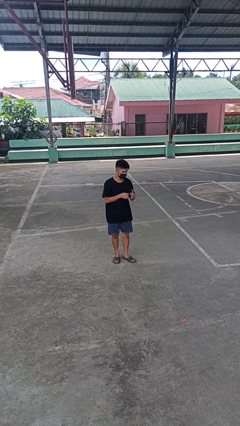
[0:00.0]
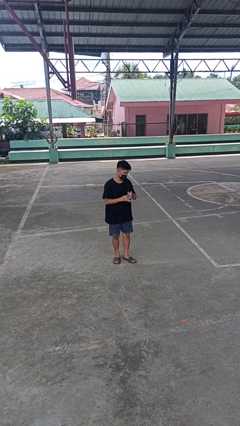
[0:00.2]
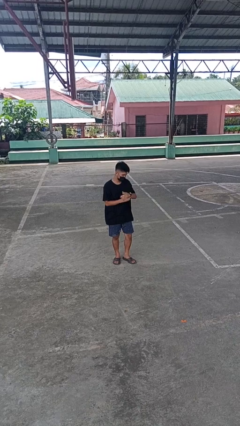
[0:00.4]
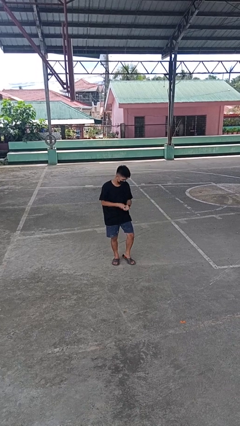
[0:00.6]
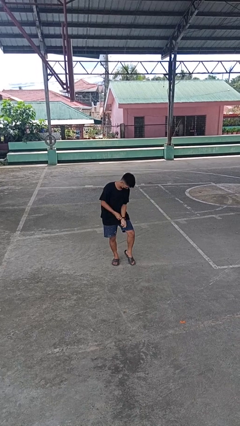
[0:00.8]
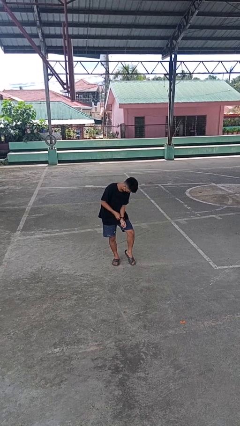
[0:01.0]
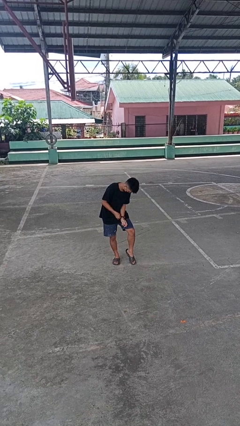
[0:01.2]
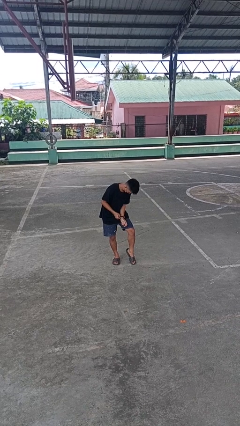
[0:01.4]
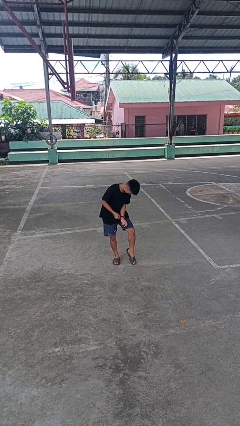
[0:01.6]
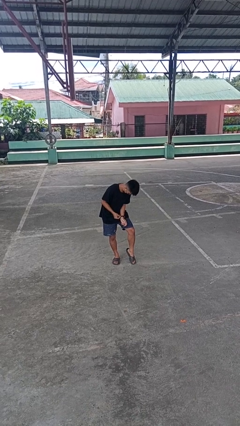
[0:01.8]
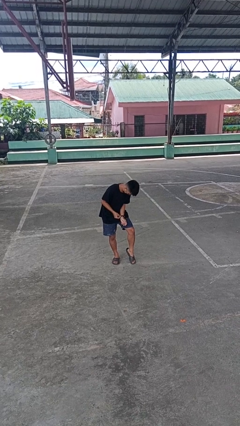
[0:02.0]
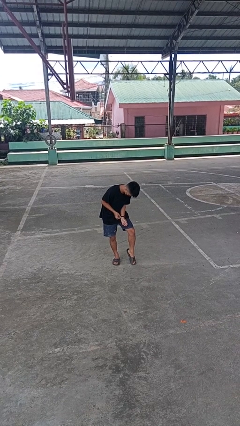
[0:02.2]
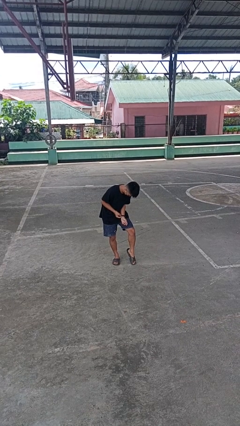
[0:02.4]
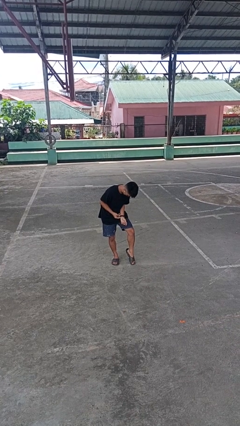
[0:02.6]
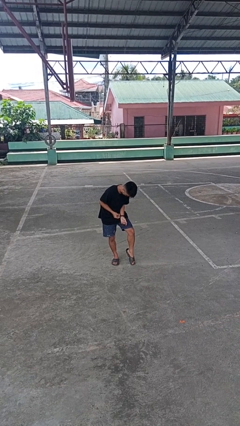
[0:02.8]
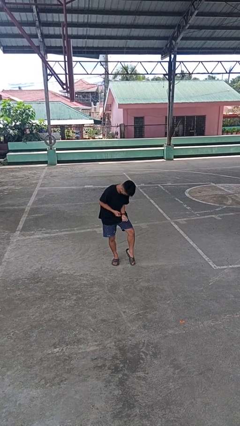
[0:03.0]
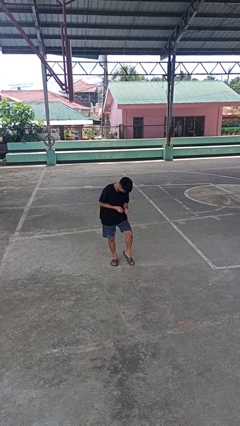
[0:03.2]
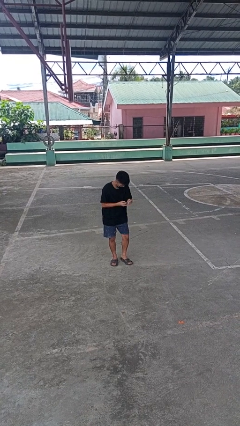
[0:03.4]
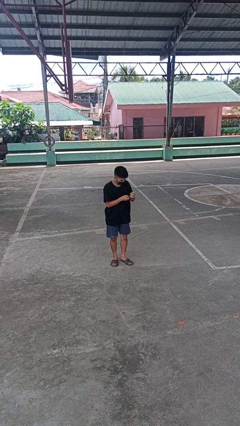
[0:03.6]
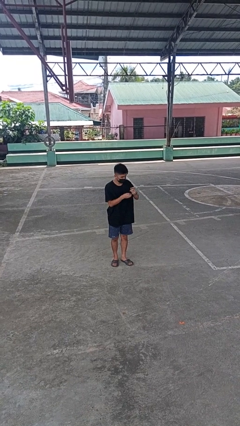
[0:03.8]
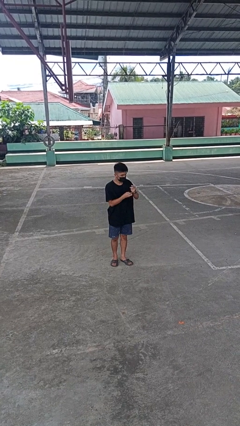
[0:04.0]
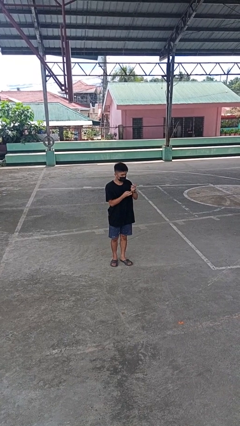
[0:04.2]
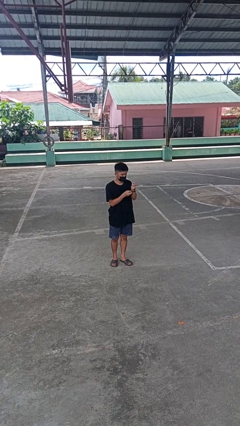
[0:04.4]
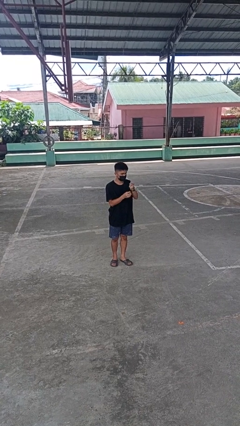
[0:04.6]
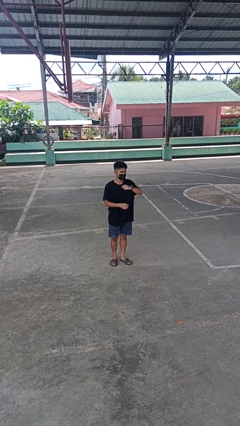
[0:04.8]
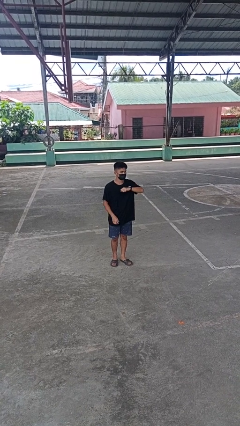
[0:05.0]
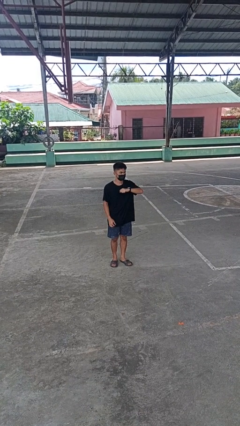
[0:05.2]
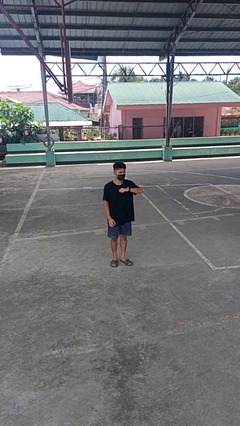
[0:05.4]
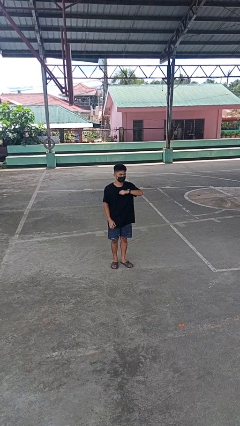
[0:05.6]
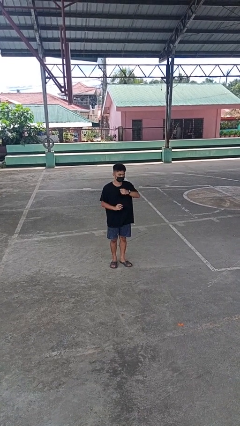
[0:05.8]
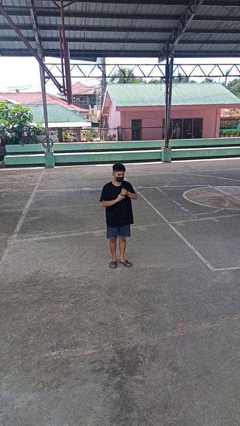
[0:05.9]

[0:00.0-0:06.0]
person puts on wristwatch

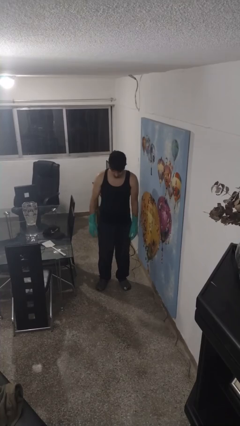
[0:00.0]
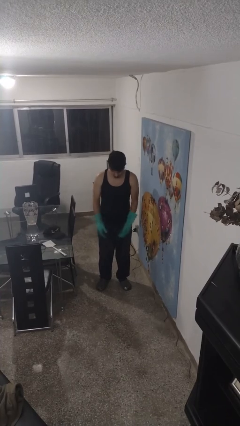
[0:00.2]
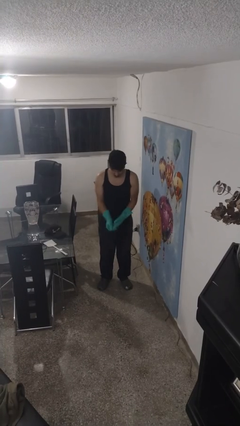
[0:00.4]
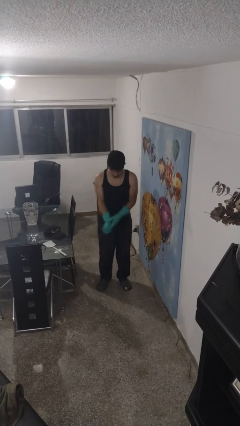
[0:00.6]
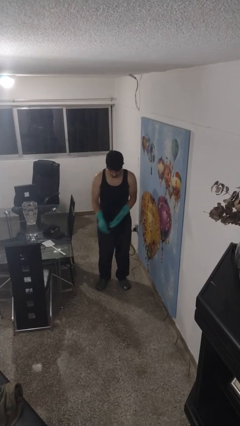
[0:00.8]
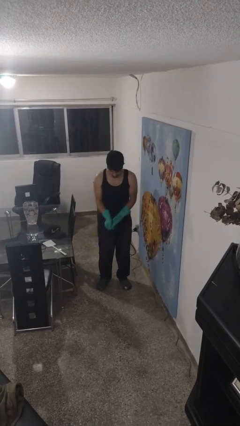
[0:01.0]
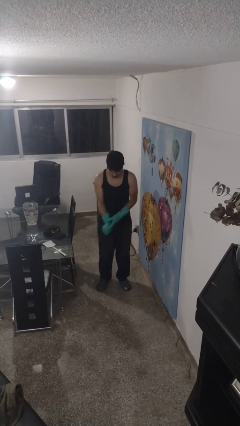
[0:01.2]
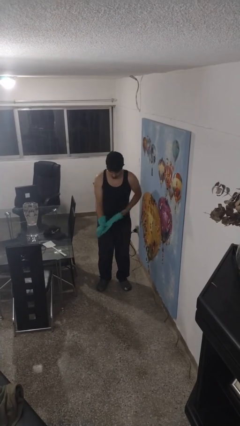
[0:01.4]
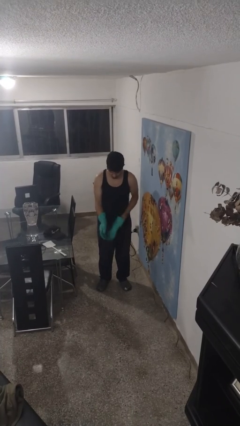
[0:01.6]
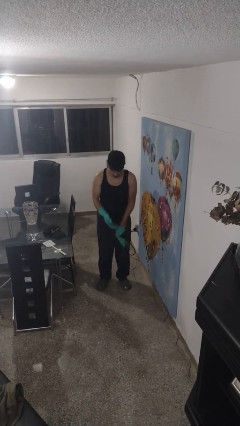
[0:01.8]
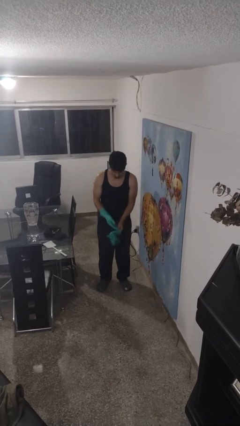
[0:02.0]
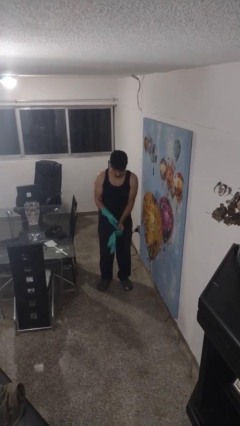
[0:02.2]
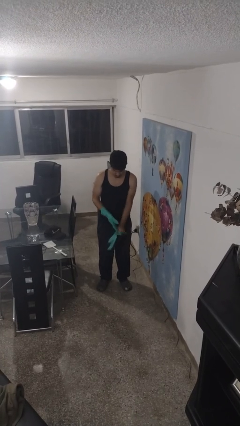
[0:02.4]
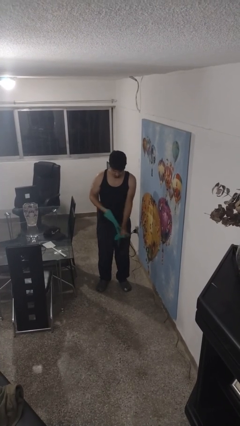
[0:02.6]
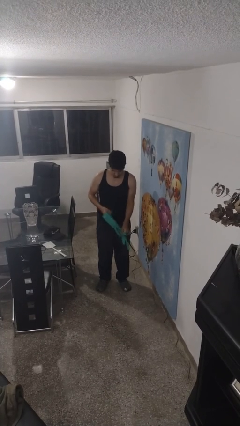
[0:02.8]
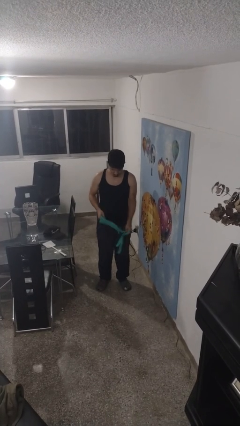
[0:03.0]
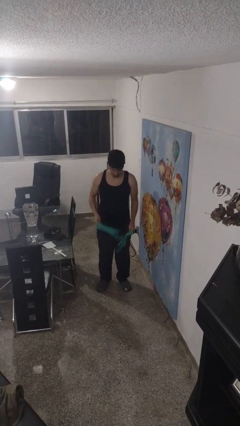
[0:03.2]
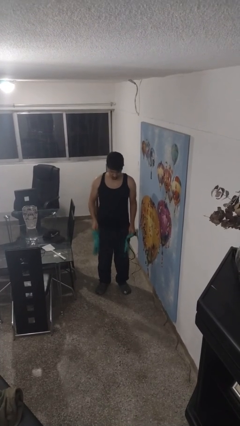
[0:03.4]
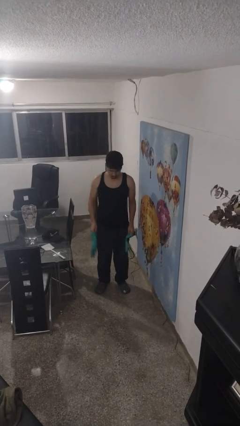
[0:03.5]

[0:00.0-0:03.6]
person takes off gloves

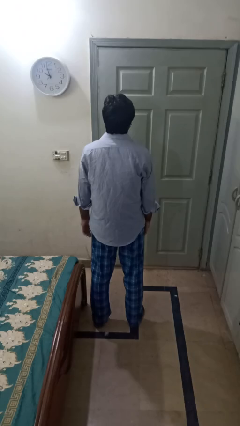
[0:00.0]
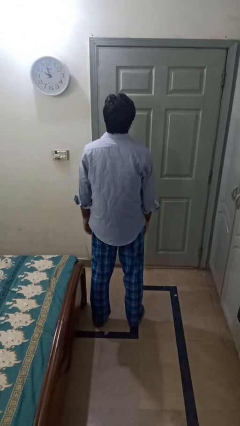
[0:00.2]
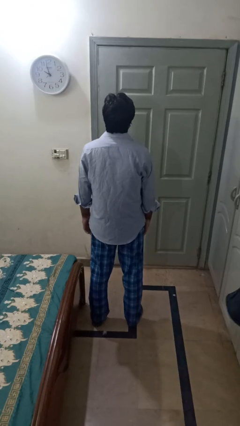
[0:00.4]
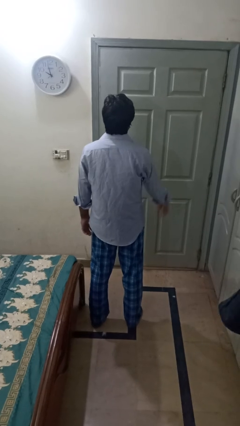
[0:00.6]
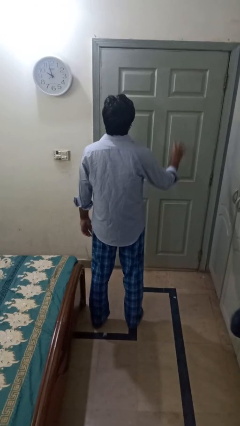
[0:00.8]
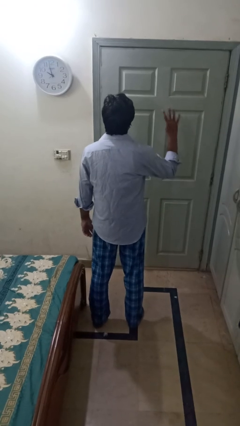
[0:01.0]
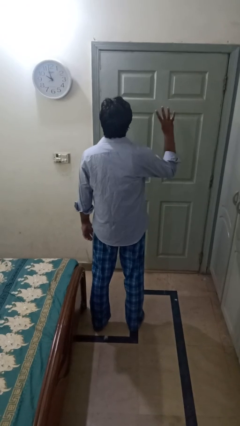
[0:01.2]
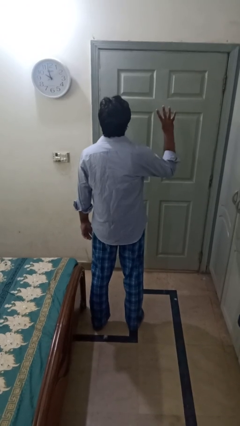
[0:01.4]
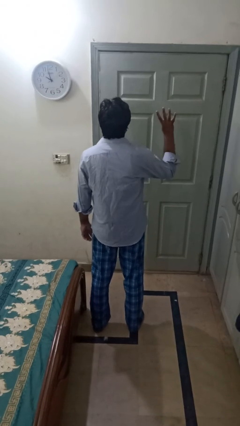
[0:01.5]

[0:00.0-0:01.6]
person gestures number four

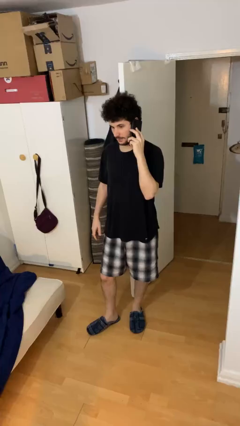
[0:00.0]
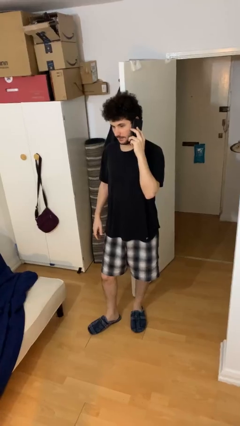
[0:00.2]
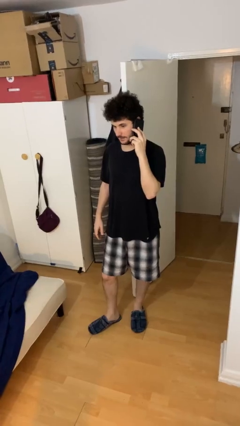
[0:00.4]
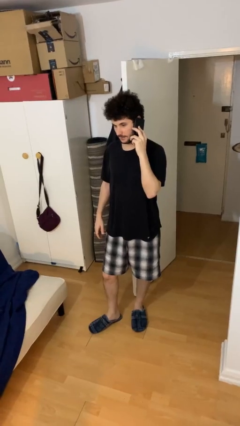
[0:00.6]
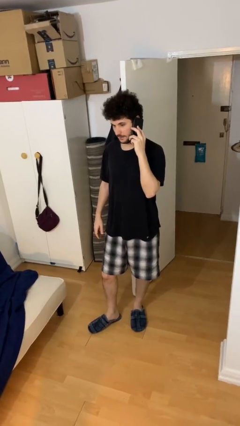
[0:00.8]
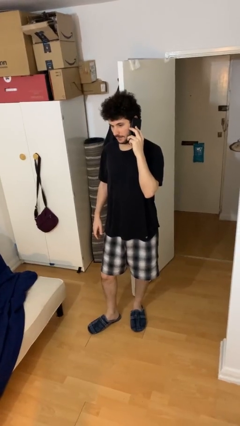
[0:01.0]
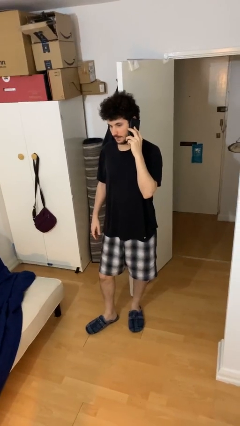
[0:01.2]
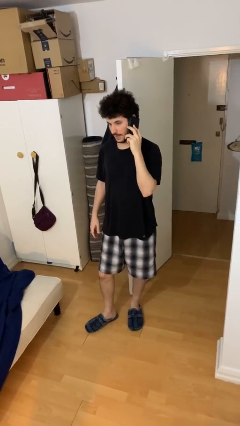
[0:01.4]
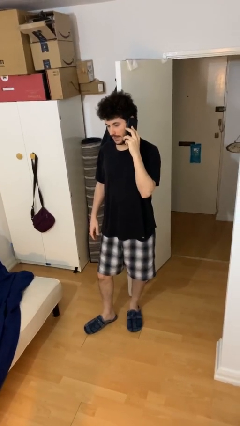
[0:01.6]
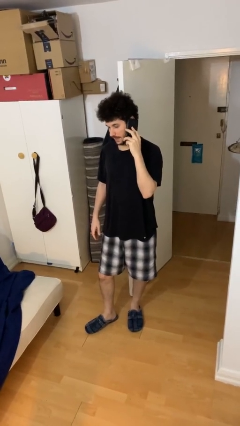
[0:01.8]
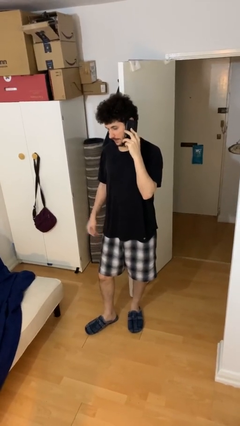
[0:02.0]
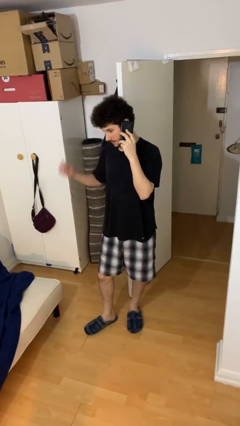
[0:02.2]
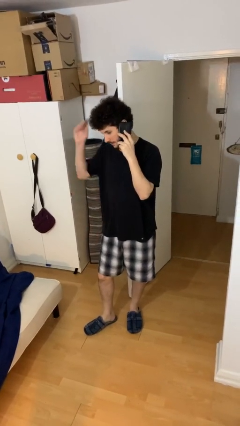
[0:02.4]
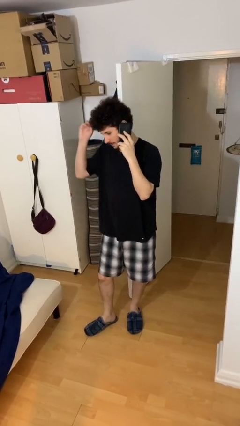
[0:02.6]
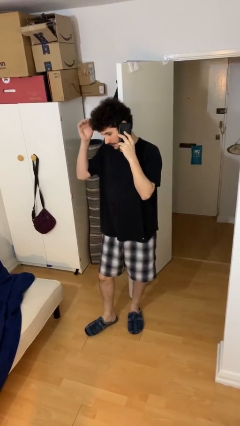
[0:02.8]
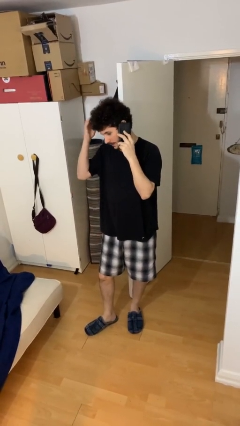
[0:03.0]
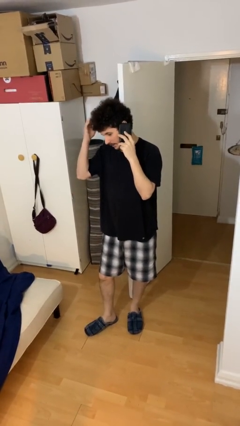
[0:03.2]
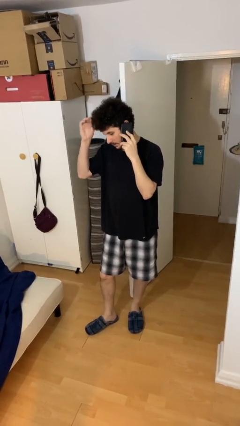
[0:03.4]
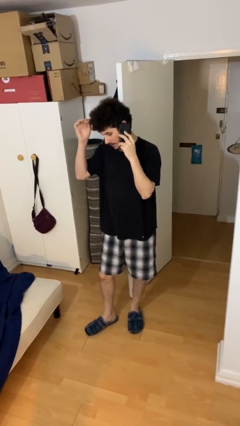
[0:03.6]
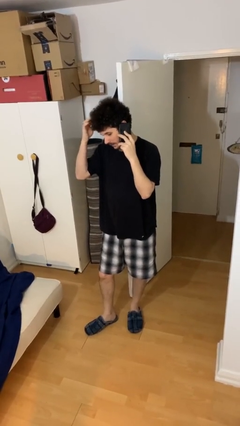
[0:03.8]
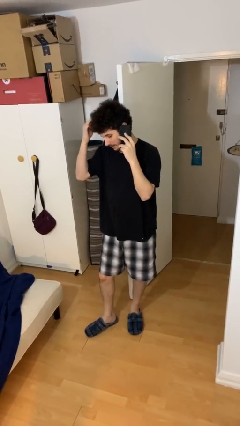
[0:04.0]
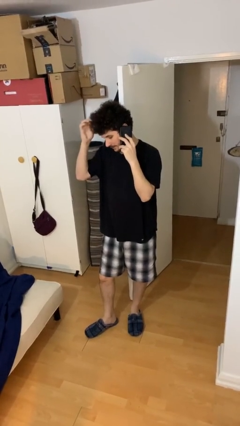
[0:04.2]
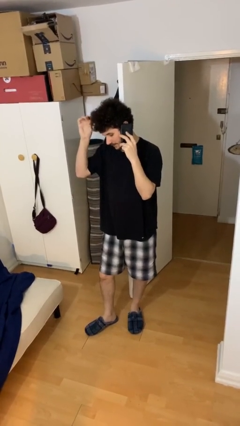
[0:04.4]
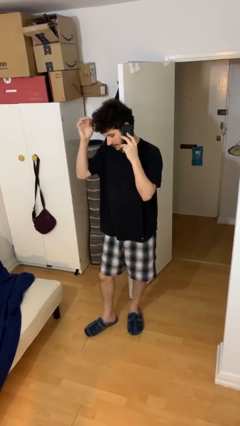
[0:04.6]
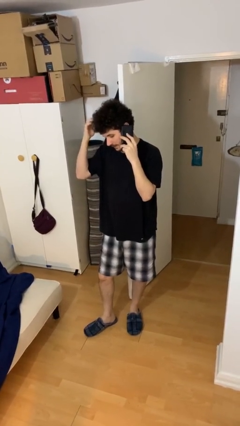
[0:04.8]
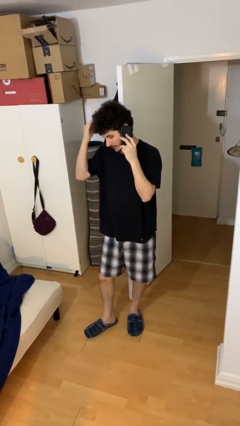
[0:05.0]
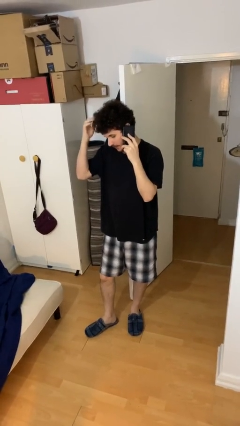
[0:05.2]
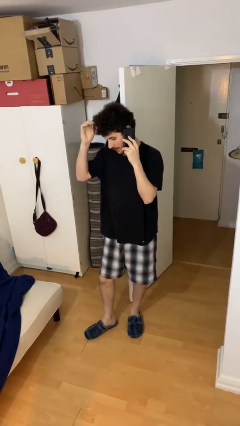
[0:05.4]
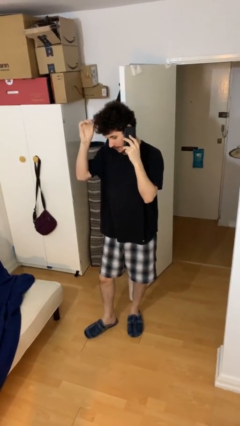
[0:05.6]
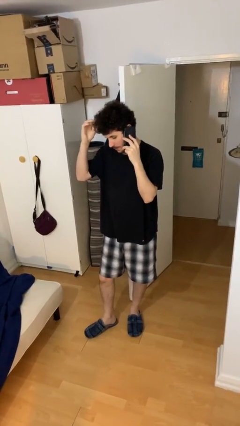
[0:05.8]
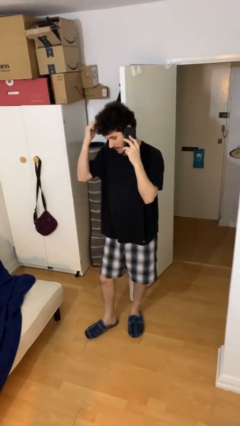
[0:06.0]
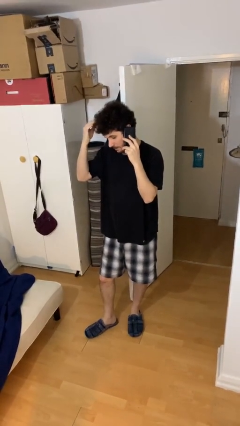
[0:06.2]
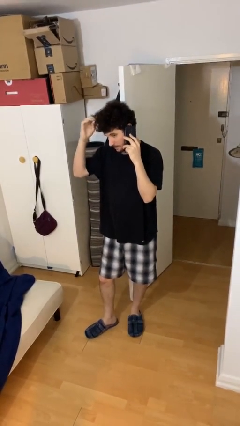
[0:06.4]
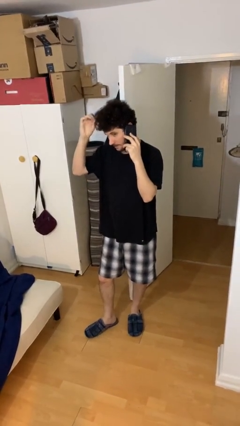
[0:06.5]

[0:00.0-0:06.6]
person talks on phone
